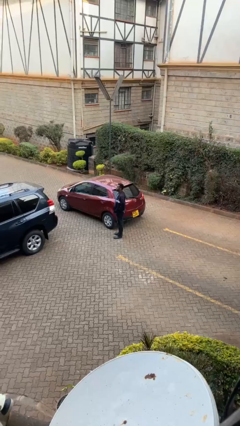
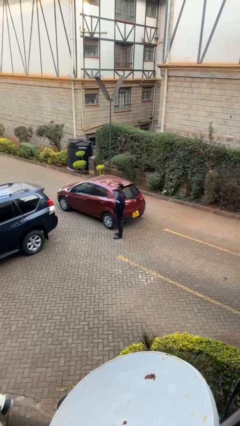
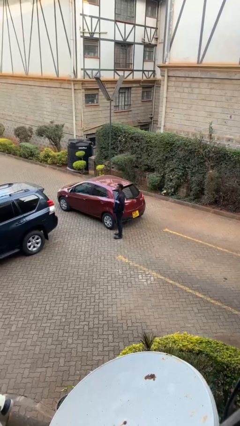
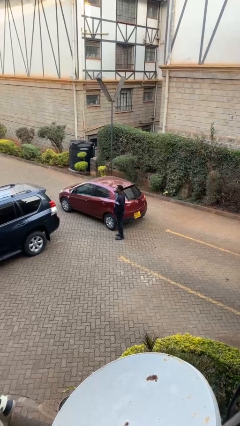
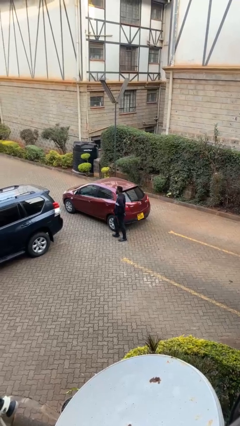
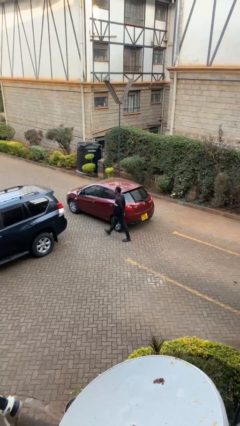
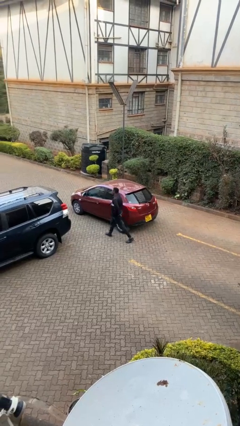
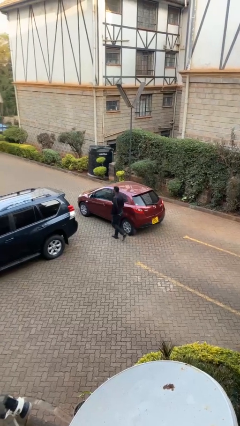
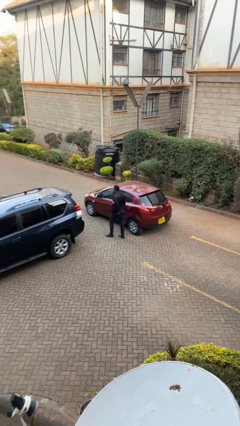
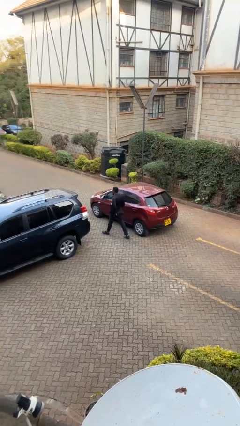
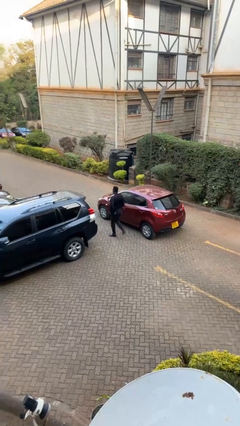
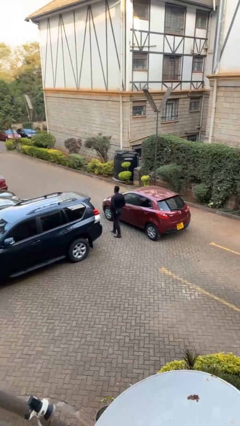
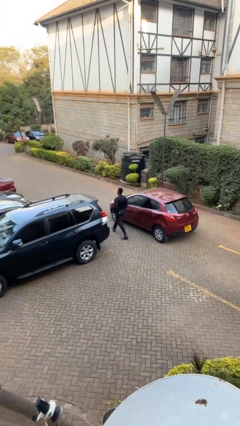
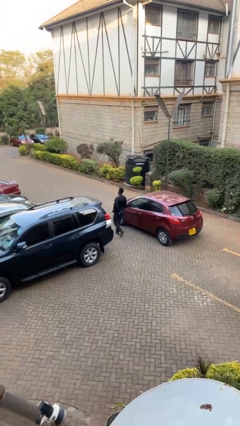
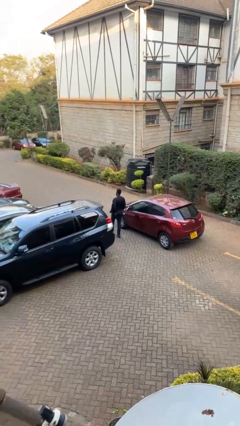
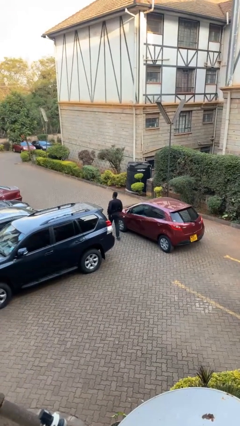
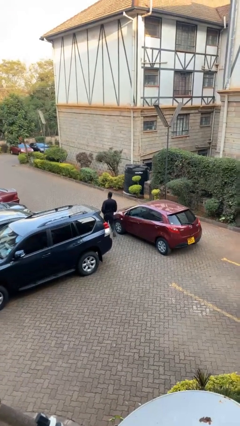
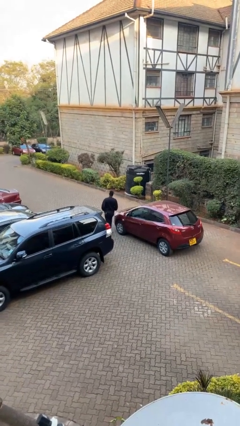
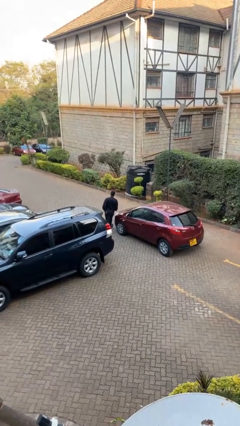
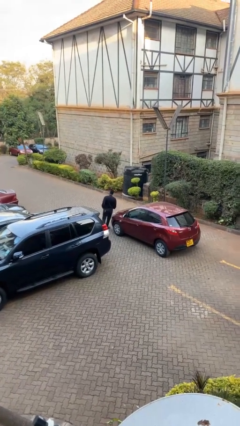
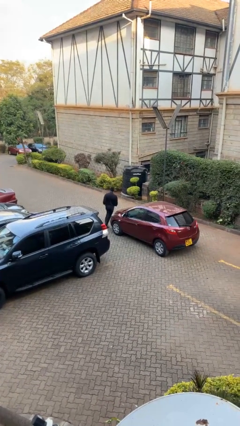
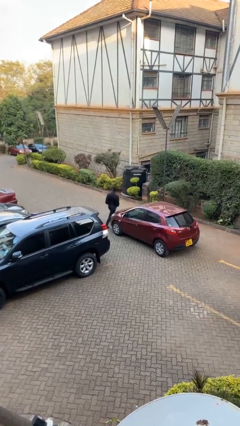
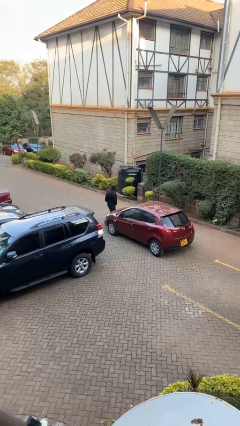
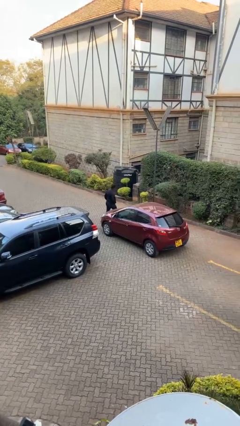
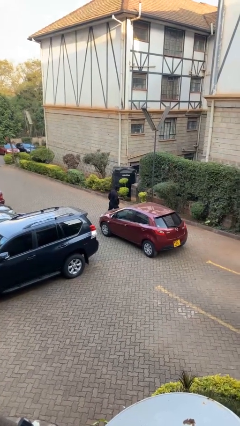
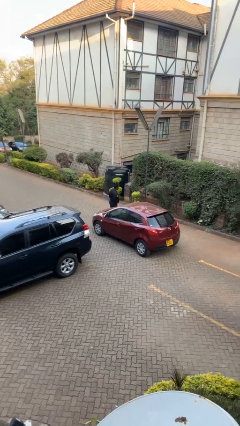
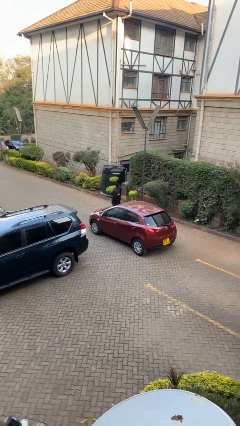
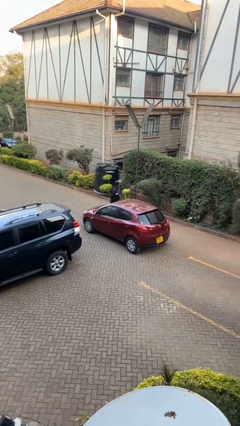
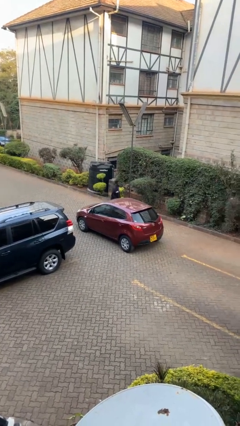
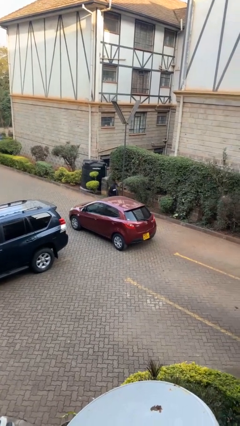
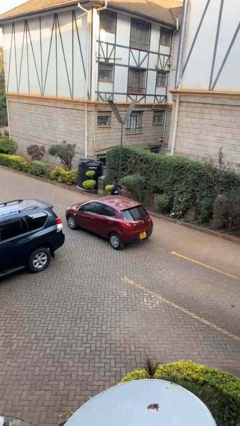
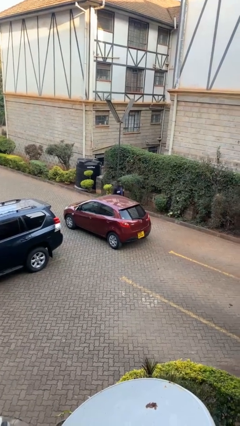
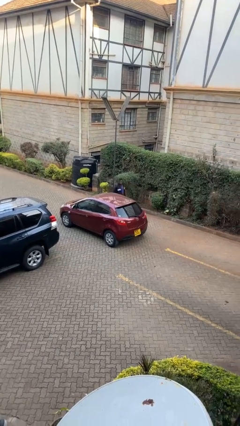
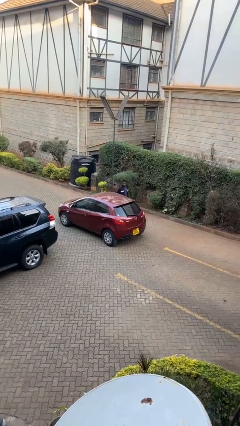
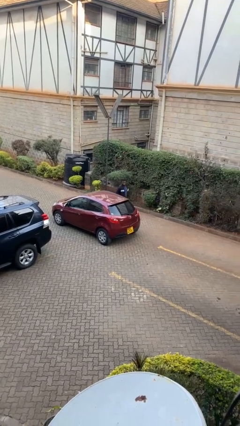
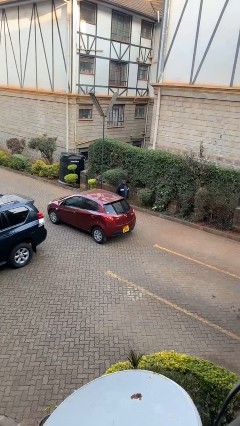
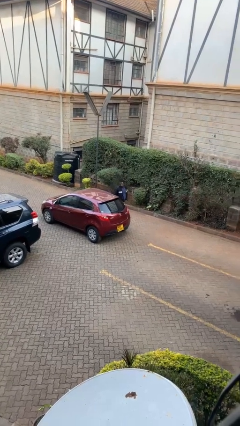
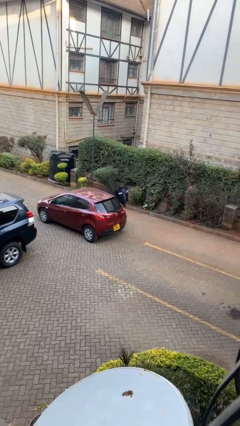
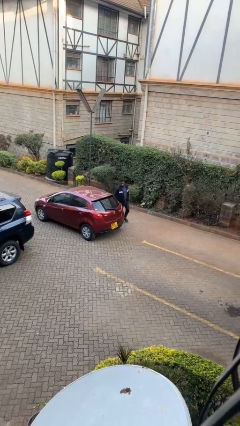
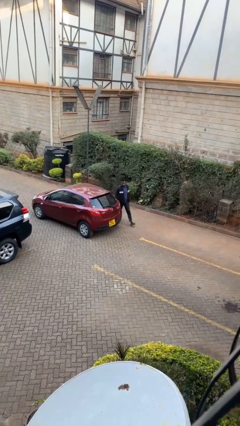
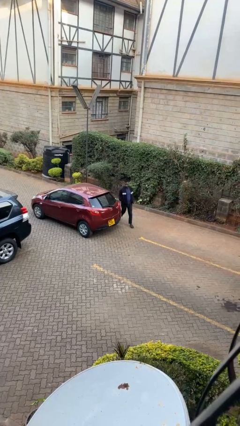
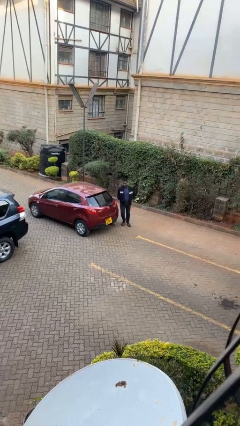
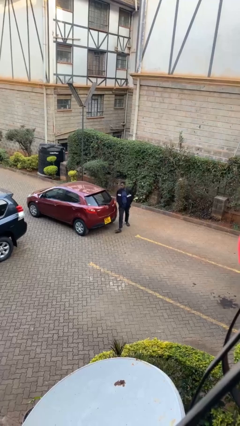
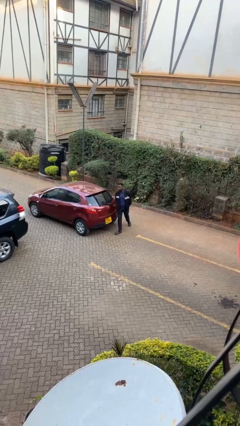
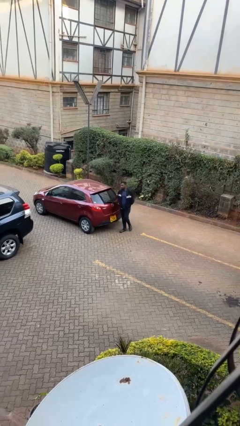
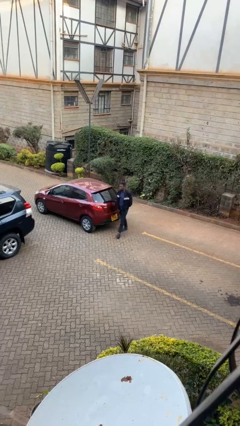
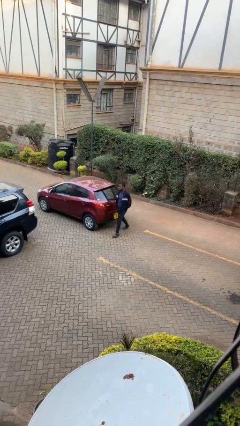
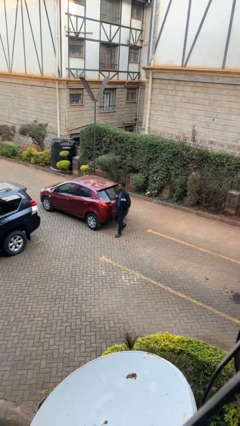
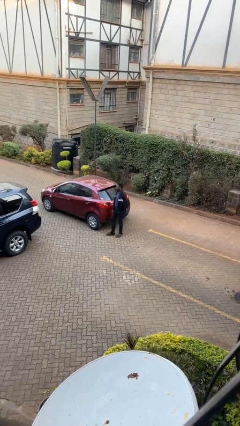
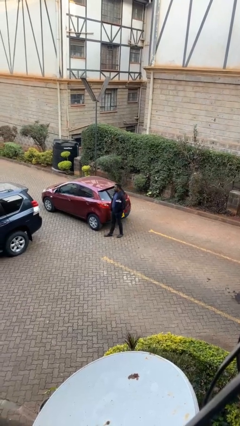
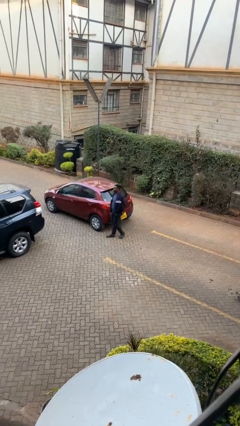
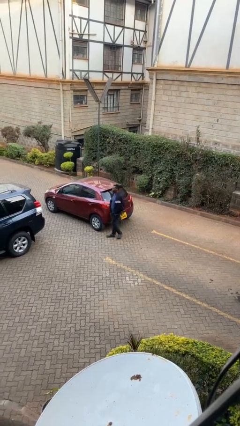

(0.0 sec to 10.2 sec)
person walks around car

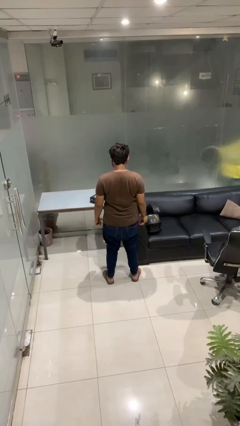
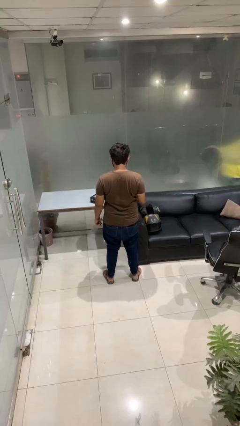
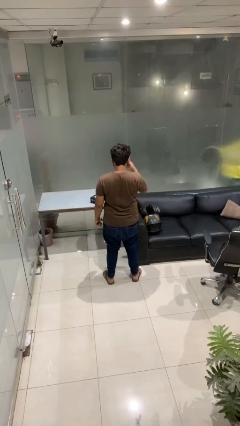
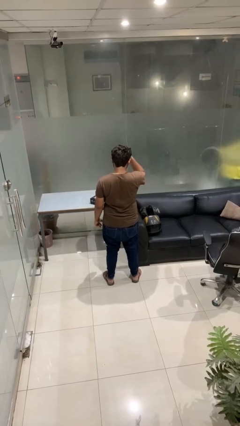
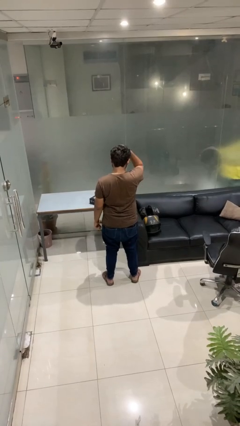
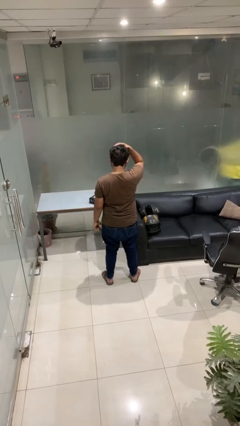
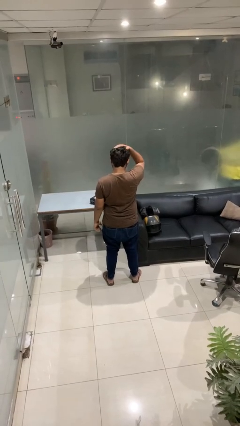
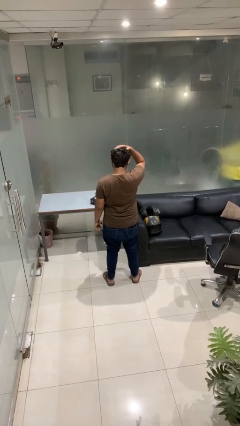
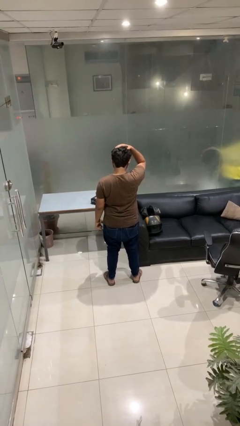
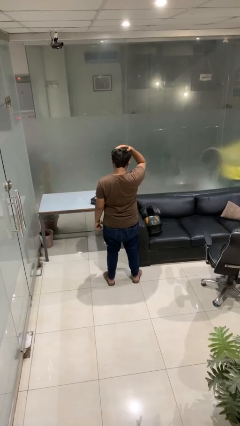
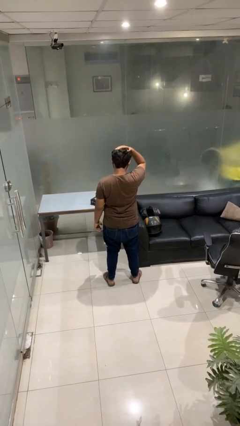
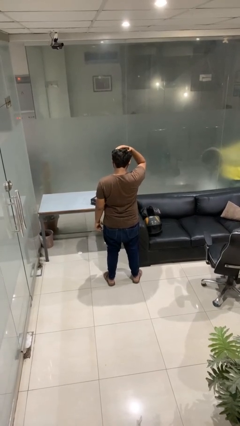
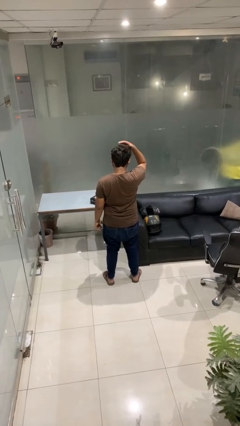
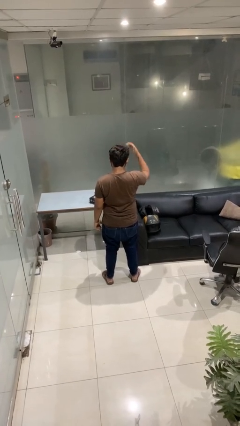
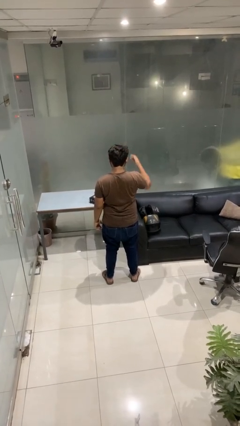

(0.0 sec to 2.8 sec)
person pats head

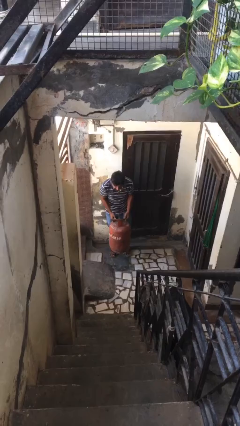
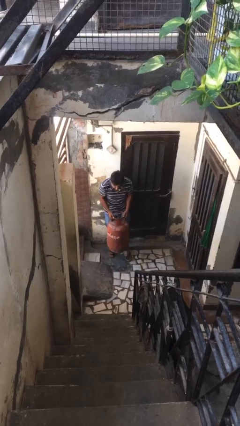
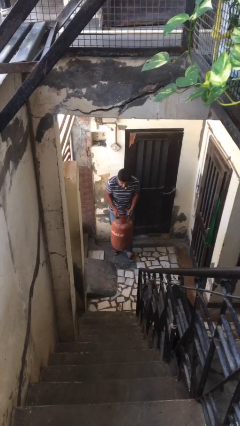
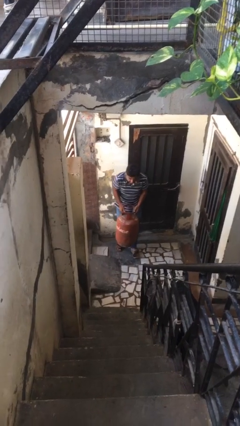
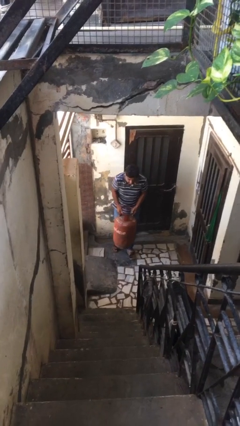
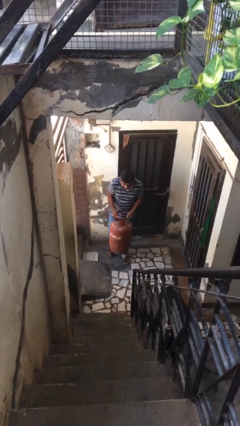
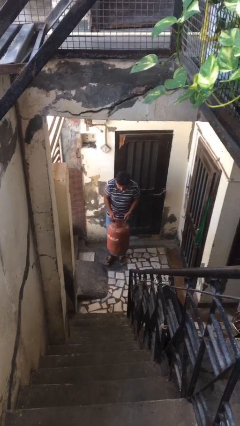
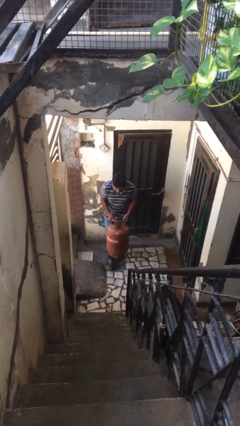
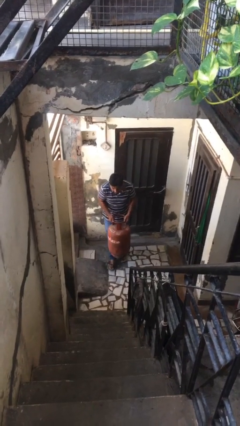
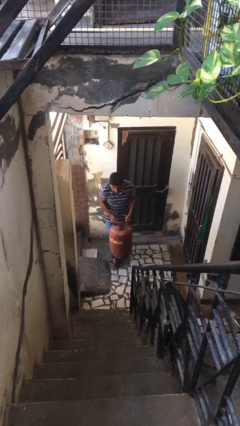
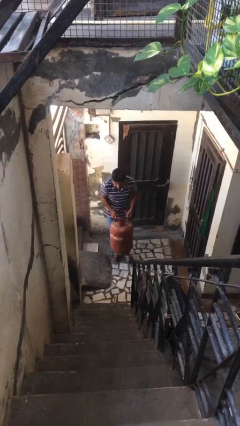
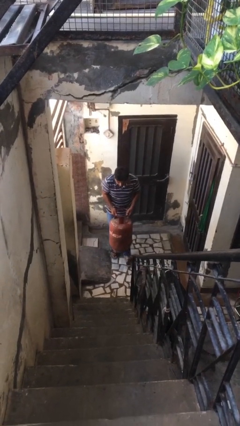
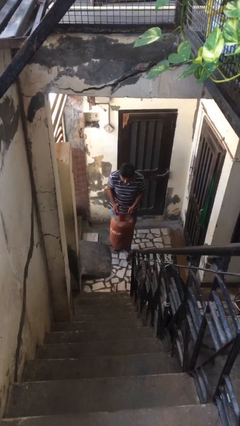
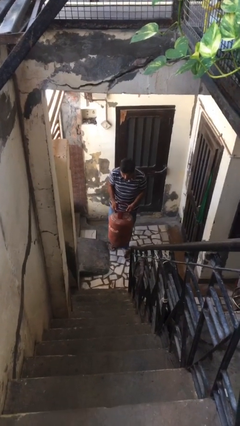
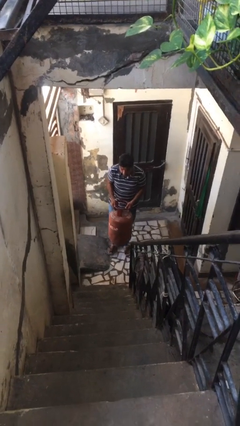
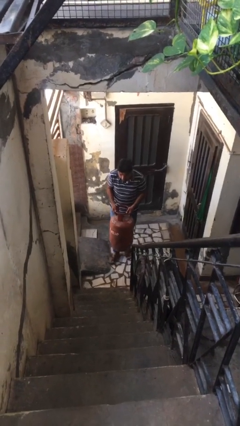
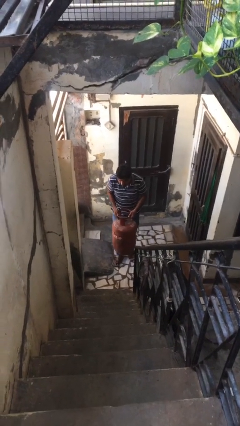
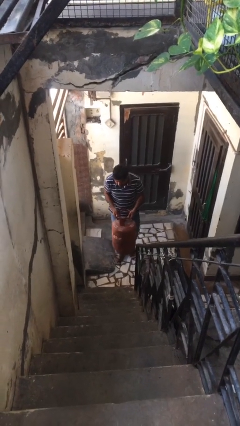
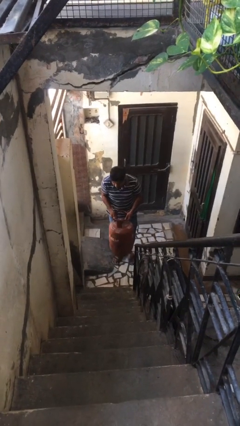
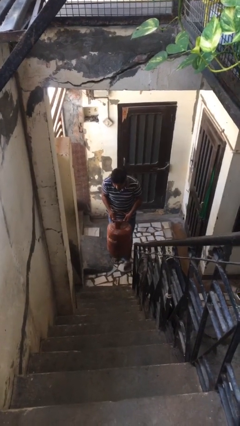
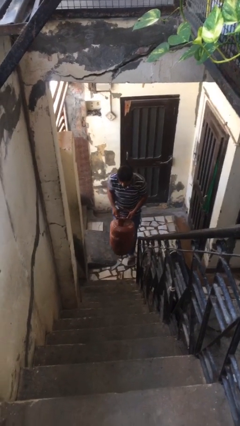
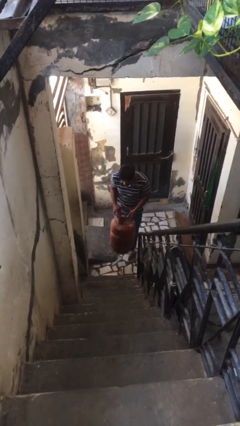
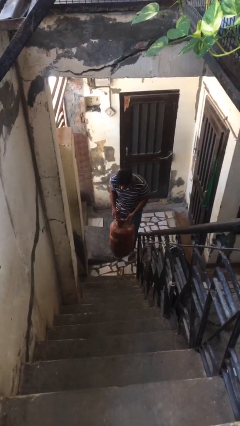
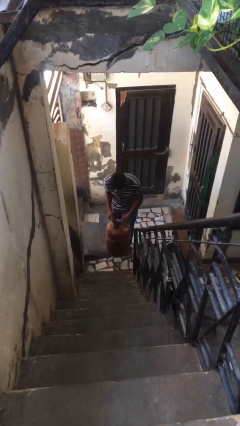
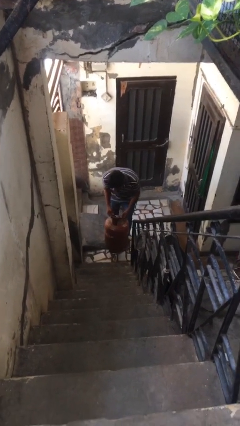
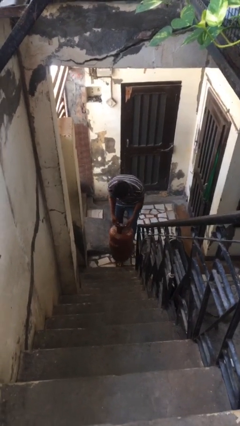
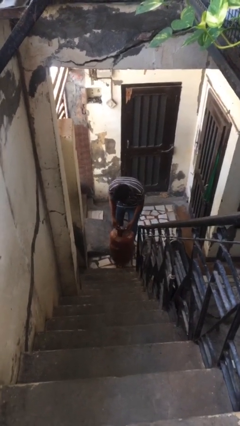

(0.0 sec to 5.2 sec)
person carries heavy object
